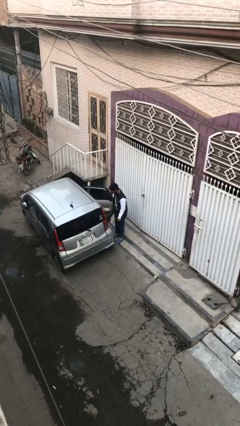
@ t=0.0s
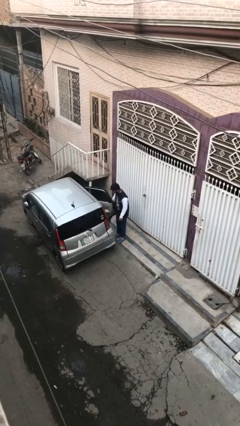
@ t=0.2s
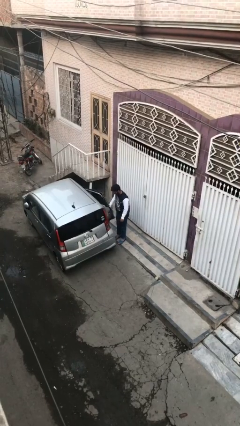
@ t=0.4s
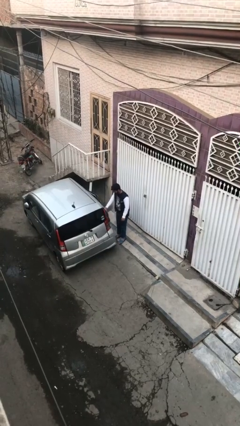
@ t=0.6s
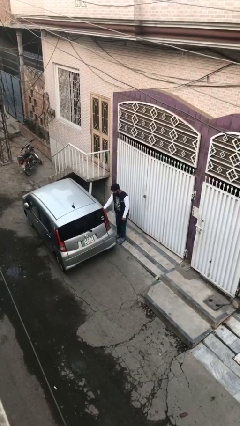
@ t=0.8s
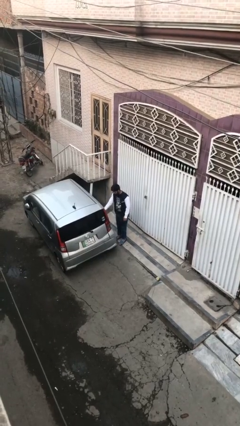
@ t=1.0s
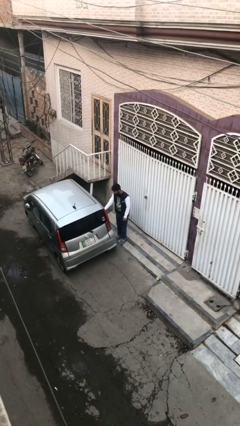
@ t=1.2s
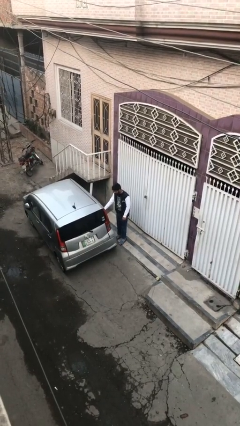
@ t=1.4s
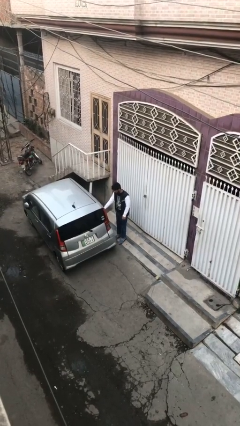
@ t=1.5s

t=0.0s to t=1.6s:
person closes car door

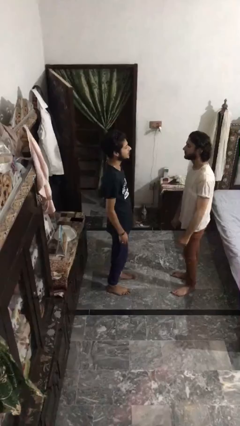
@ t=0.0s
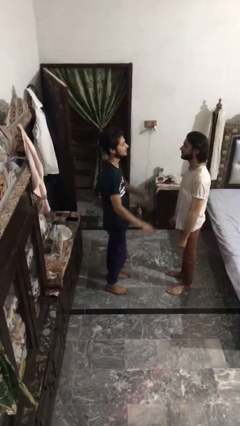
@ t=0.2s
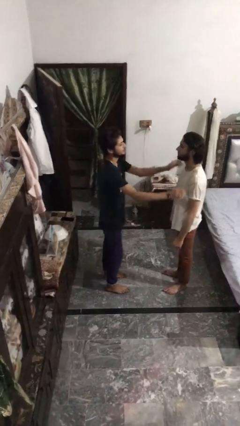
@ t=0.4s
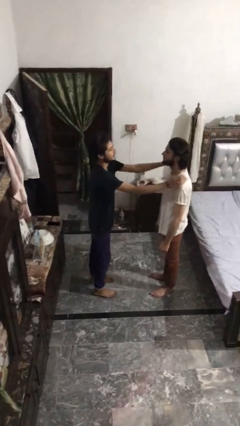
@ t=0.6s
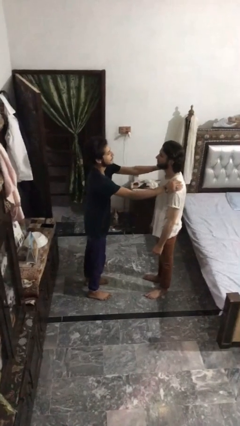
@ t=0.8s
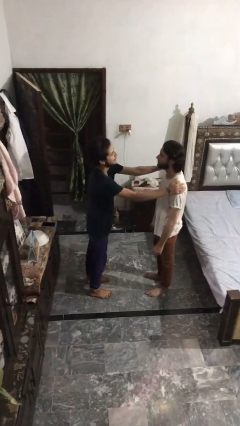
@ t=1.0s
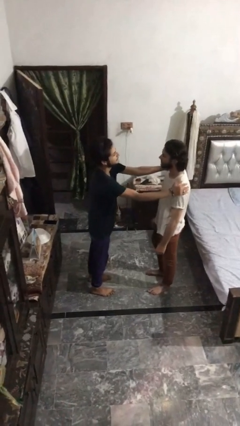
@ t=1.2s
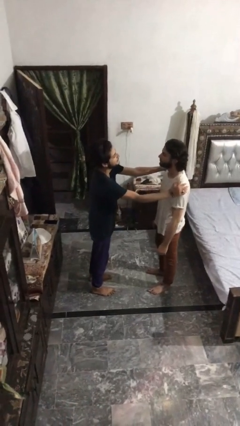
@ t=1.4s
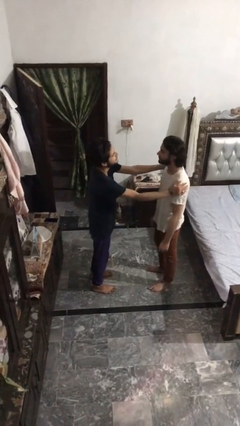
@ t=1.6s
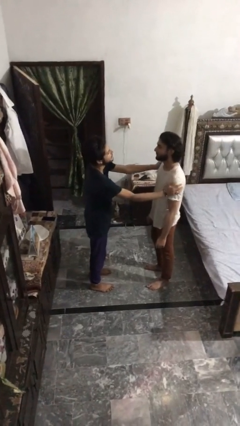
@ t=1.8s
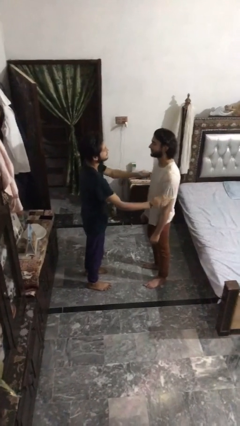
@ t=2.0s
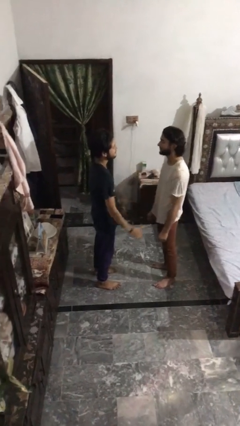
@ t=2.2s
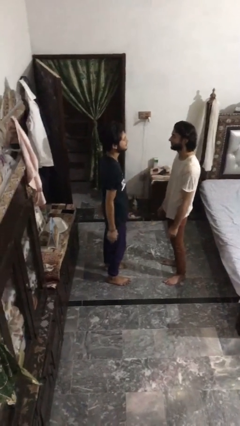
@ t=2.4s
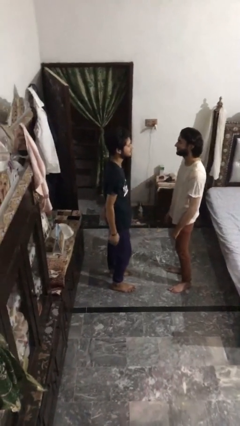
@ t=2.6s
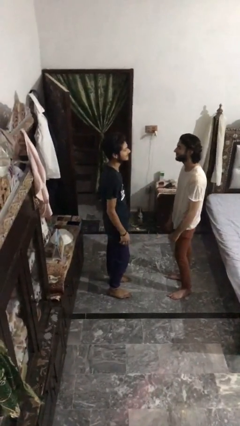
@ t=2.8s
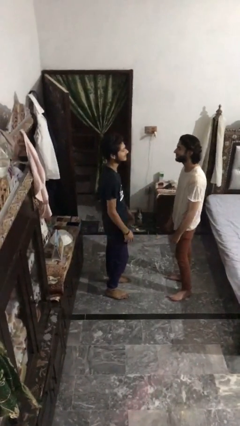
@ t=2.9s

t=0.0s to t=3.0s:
person pounds shoulders of person

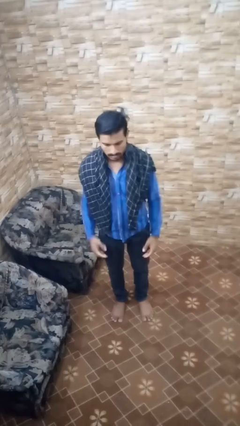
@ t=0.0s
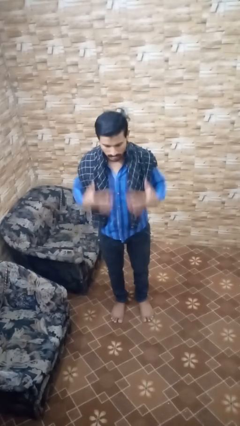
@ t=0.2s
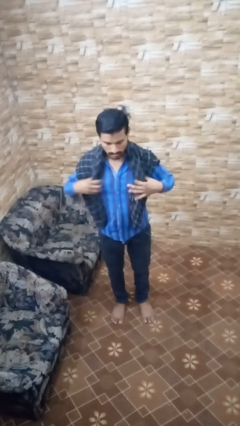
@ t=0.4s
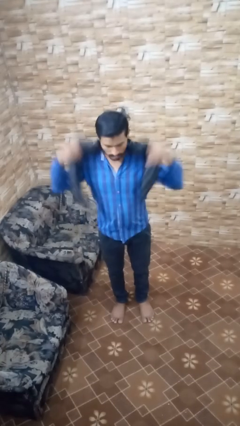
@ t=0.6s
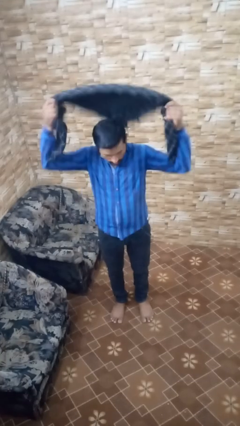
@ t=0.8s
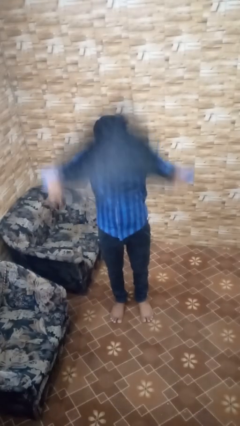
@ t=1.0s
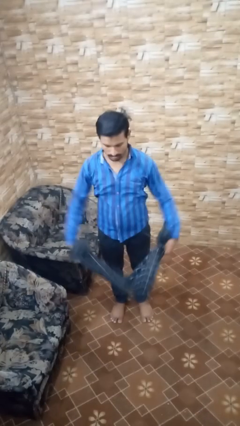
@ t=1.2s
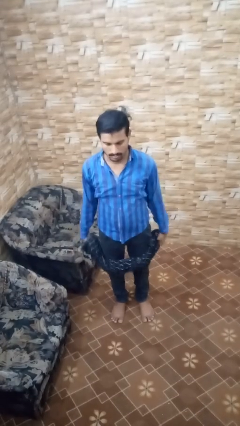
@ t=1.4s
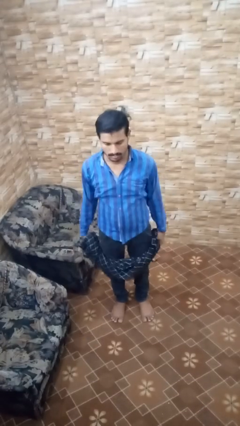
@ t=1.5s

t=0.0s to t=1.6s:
person takes off scarf

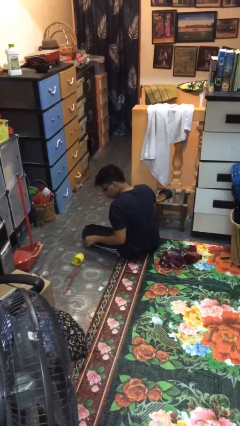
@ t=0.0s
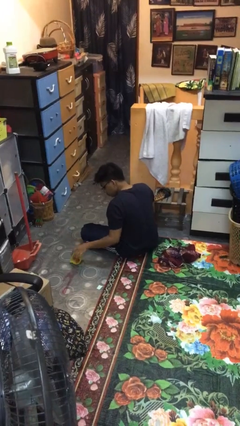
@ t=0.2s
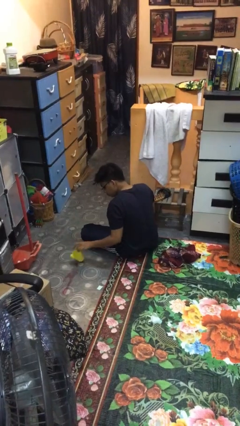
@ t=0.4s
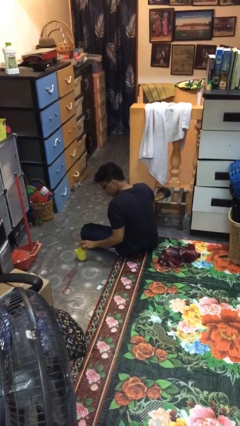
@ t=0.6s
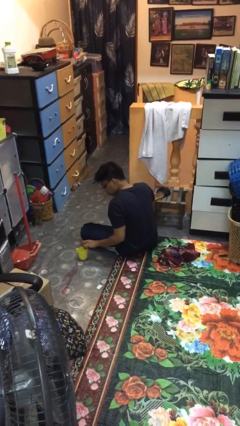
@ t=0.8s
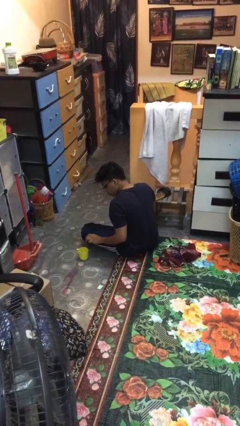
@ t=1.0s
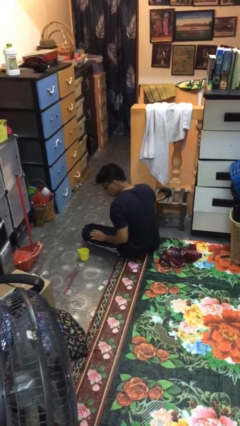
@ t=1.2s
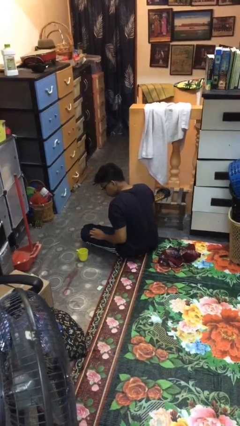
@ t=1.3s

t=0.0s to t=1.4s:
person sets upright glass

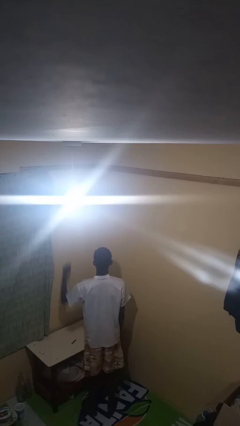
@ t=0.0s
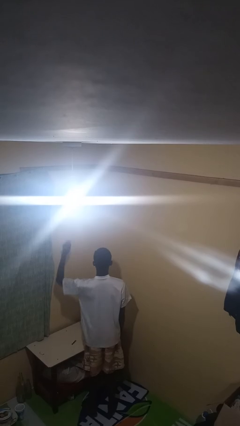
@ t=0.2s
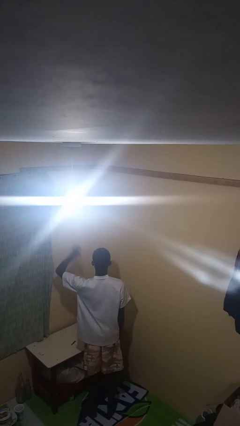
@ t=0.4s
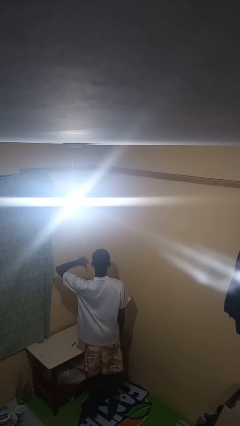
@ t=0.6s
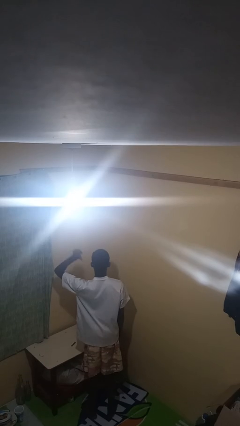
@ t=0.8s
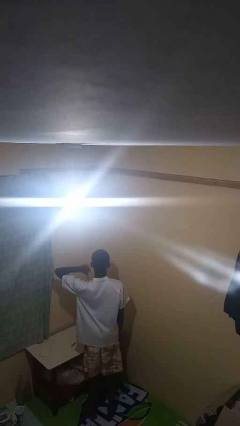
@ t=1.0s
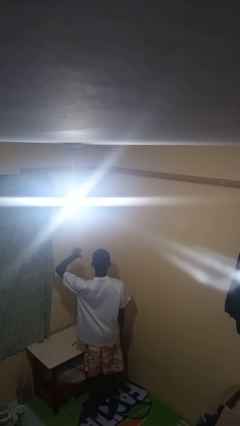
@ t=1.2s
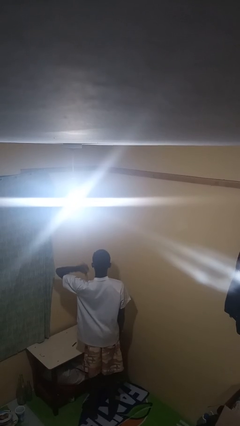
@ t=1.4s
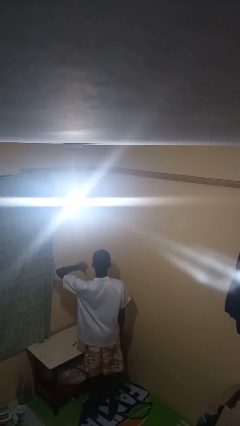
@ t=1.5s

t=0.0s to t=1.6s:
person gestures behind me

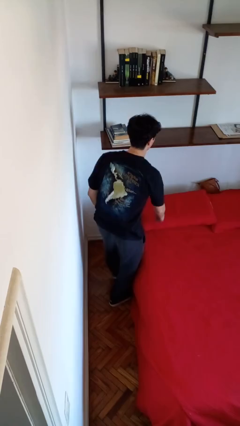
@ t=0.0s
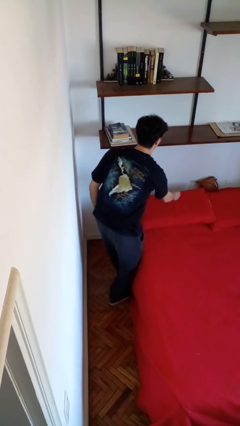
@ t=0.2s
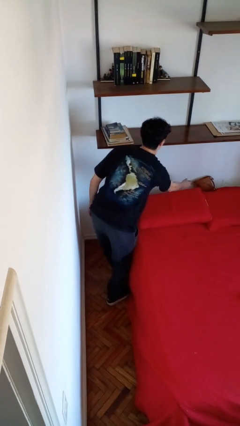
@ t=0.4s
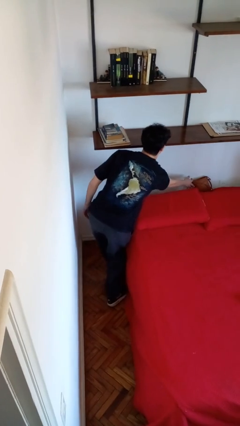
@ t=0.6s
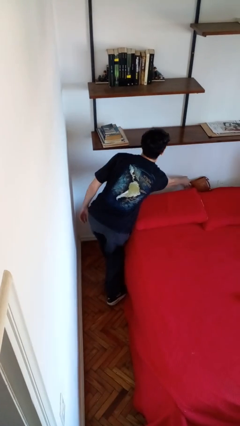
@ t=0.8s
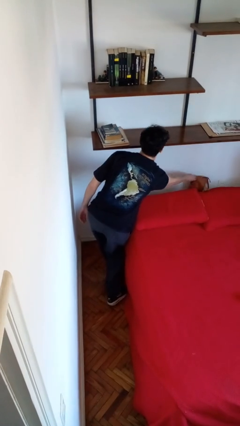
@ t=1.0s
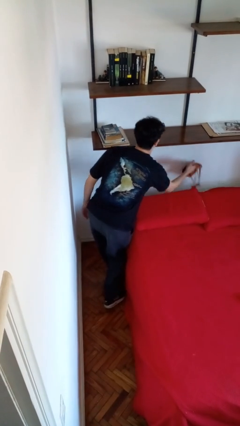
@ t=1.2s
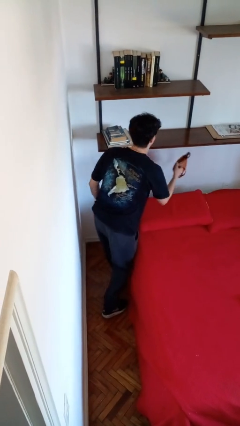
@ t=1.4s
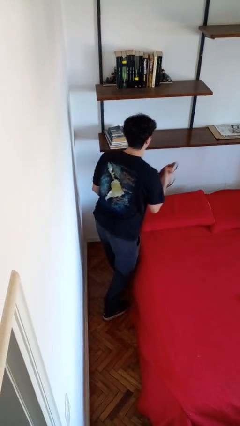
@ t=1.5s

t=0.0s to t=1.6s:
person picks up object from bed

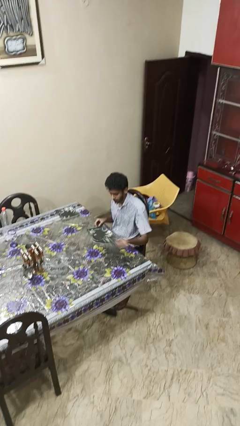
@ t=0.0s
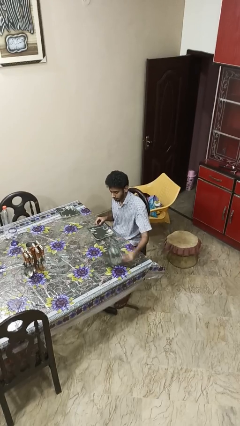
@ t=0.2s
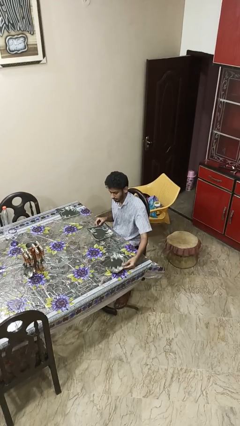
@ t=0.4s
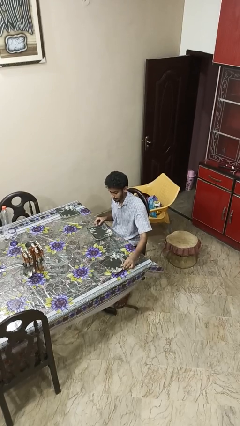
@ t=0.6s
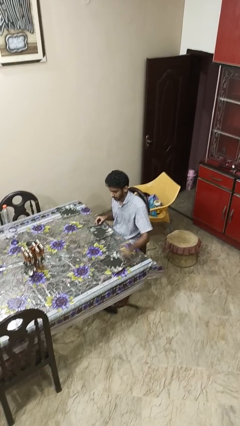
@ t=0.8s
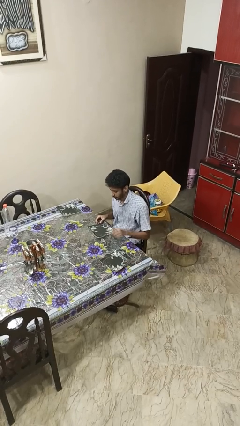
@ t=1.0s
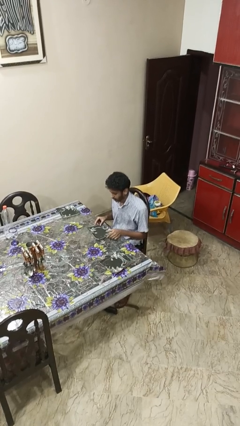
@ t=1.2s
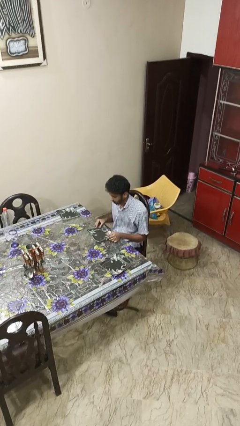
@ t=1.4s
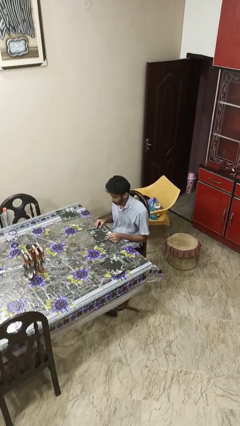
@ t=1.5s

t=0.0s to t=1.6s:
person sets table

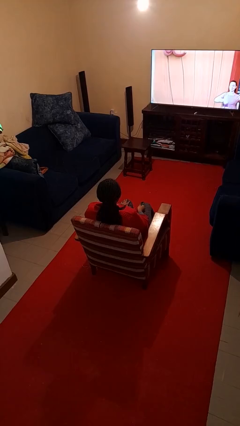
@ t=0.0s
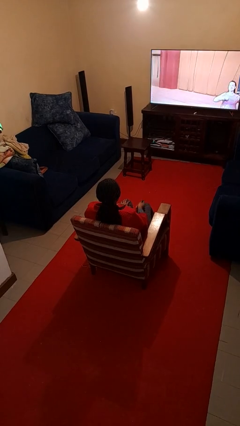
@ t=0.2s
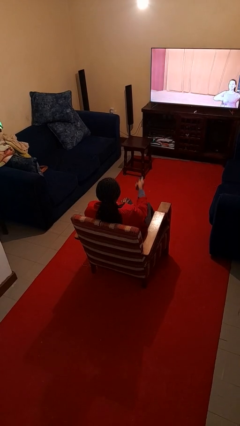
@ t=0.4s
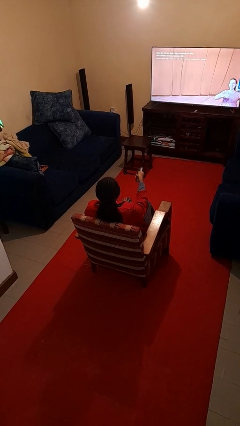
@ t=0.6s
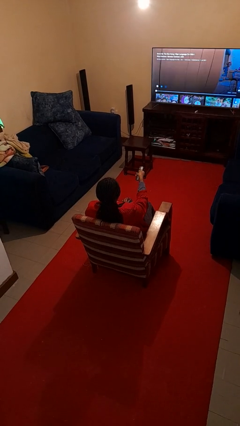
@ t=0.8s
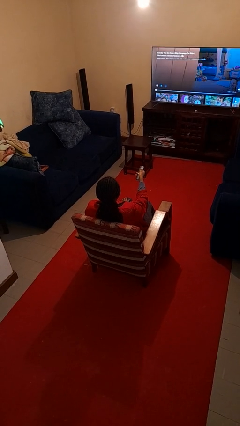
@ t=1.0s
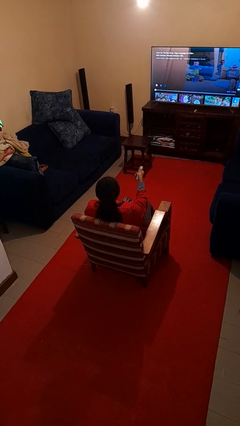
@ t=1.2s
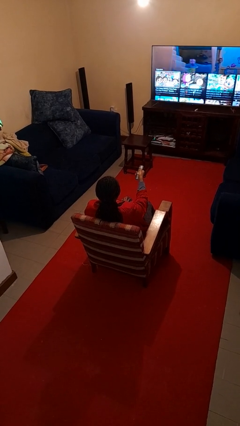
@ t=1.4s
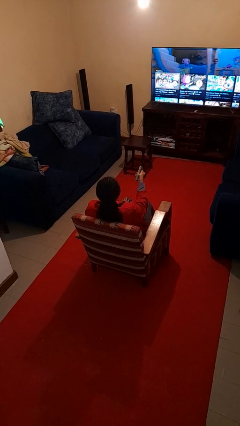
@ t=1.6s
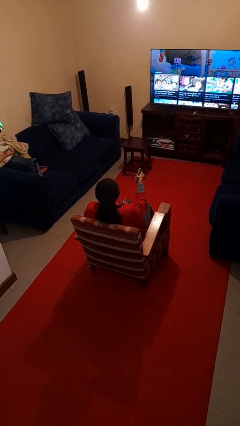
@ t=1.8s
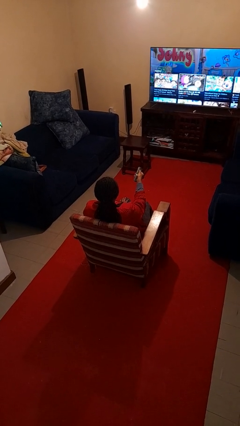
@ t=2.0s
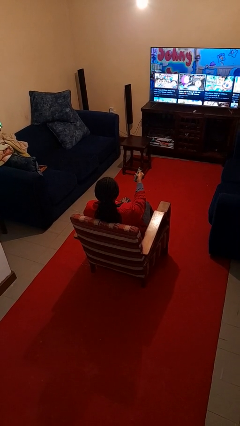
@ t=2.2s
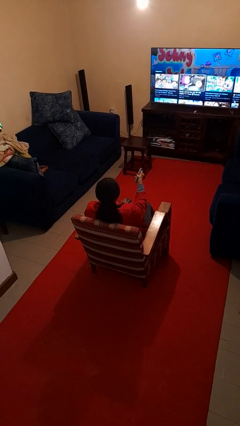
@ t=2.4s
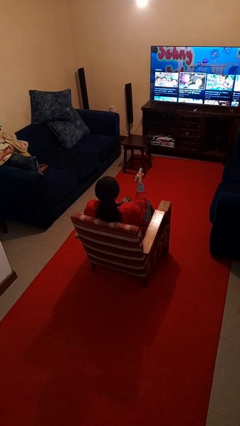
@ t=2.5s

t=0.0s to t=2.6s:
person uses television remote

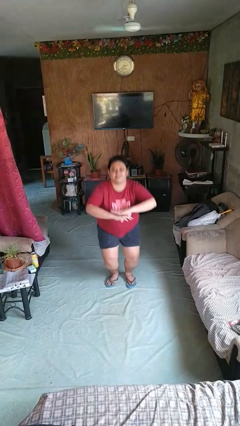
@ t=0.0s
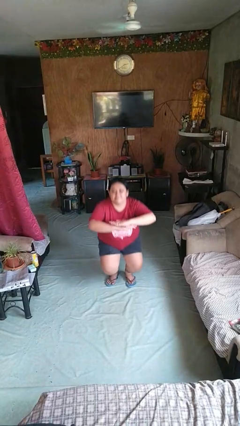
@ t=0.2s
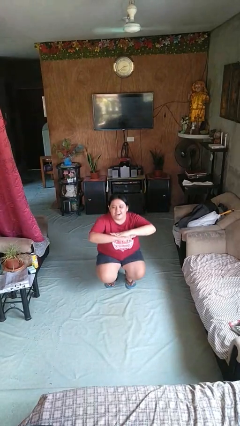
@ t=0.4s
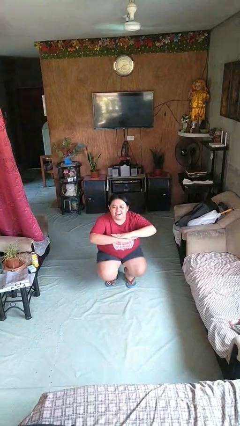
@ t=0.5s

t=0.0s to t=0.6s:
person squats

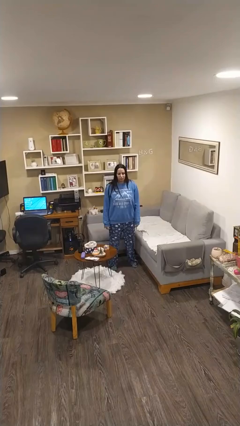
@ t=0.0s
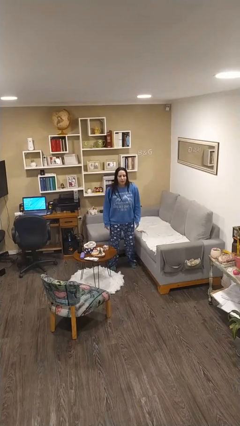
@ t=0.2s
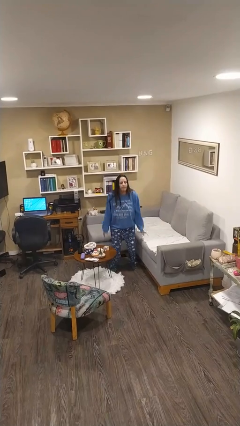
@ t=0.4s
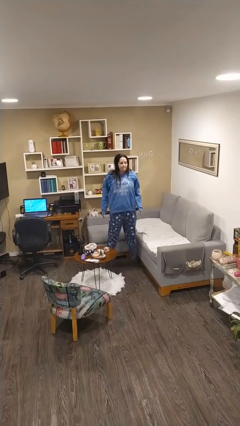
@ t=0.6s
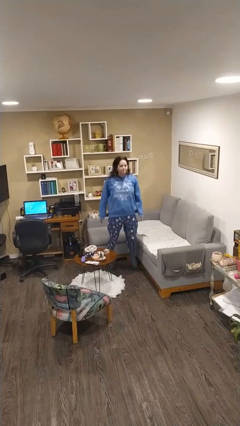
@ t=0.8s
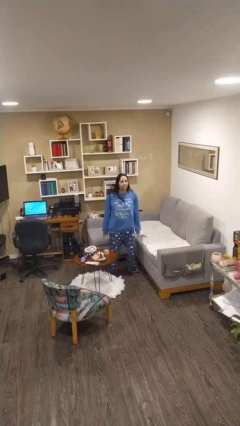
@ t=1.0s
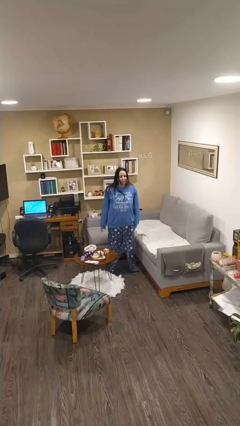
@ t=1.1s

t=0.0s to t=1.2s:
person jumps
